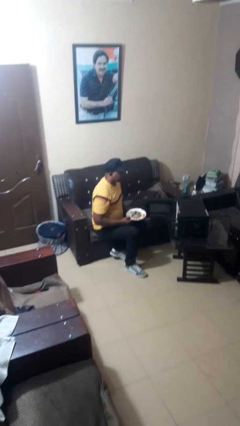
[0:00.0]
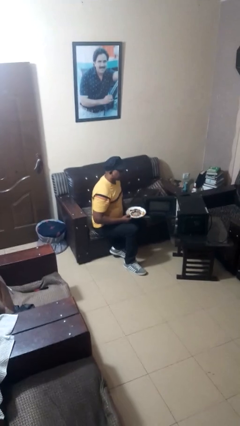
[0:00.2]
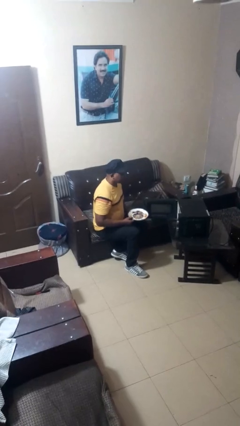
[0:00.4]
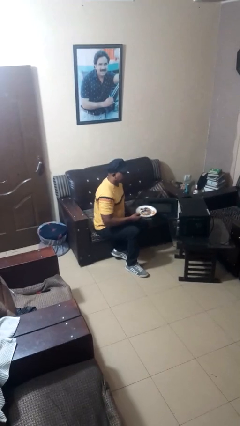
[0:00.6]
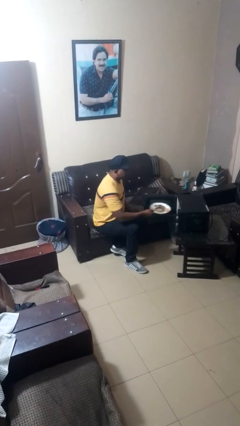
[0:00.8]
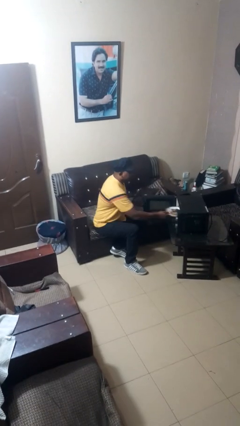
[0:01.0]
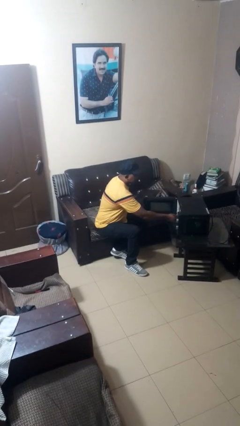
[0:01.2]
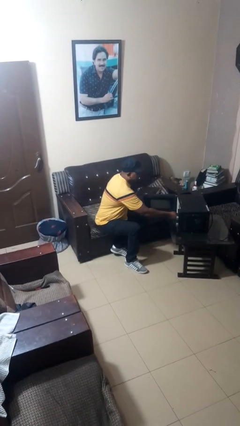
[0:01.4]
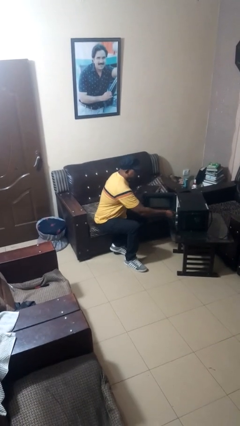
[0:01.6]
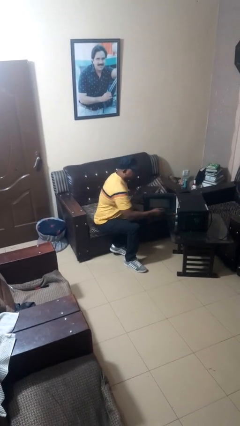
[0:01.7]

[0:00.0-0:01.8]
person puts object into microwave

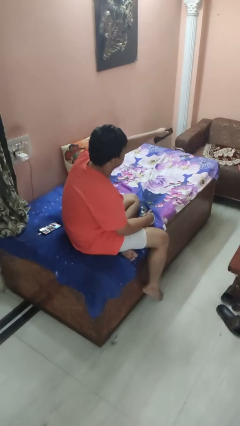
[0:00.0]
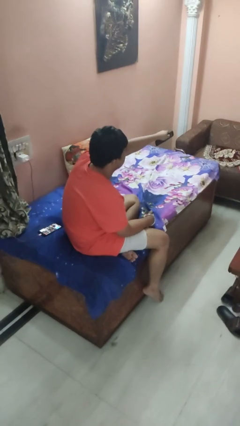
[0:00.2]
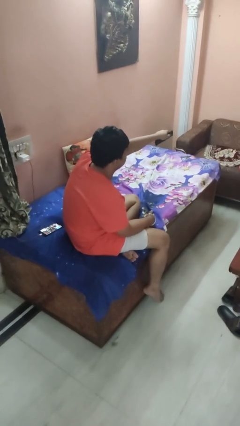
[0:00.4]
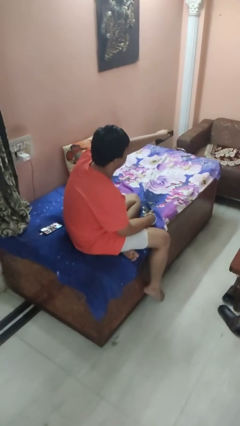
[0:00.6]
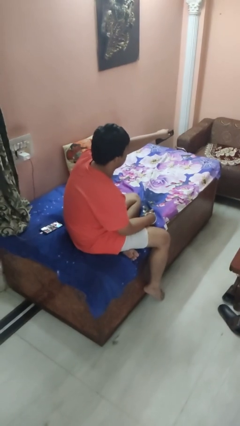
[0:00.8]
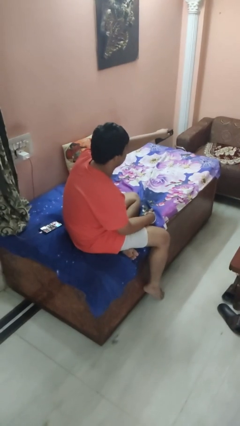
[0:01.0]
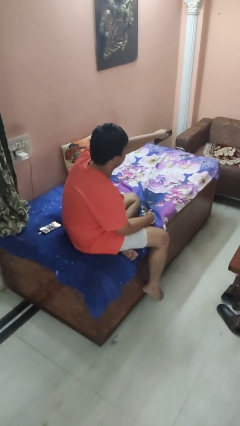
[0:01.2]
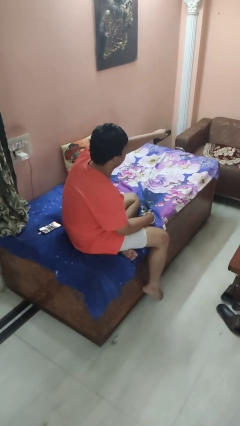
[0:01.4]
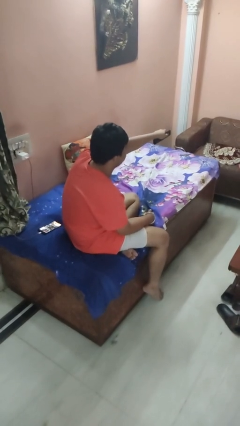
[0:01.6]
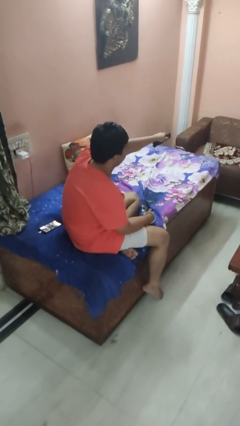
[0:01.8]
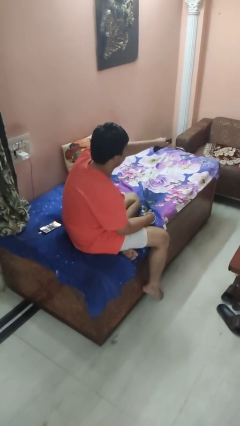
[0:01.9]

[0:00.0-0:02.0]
person uses television remote

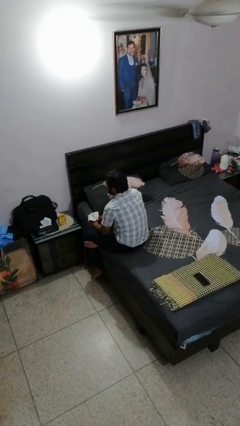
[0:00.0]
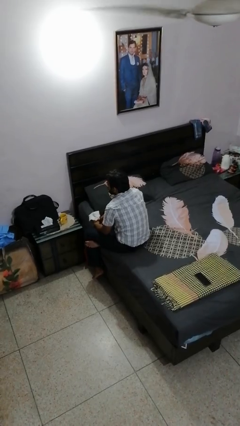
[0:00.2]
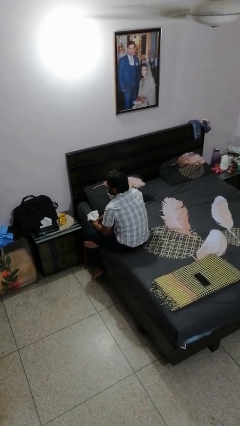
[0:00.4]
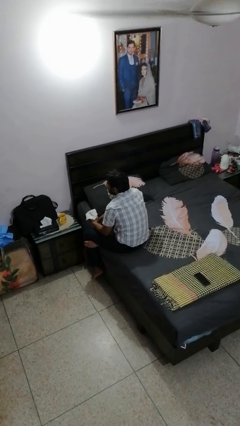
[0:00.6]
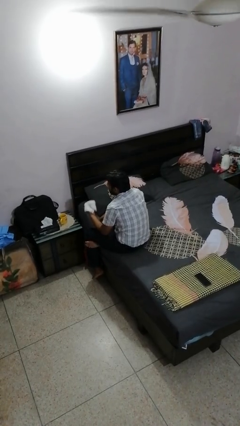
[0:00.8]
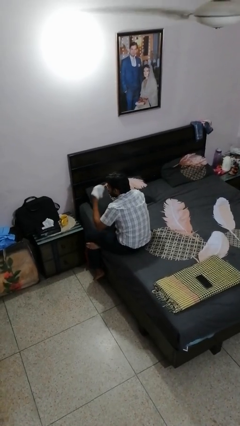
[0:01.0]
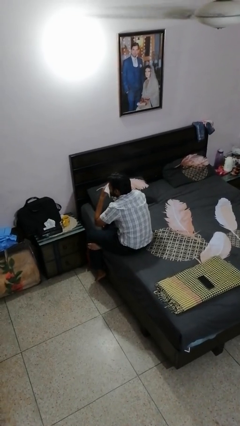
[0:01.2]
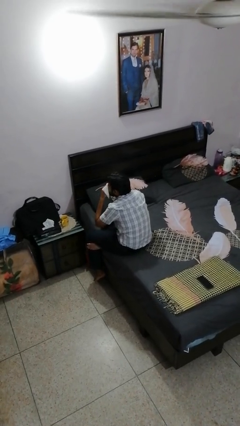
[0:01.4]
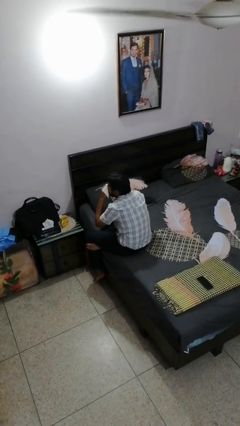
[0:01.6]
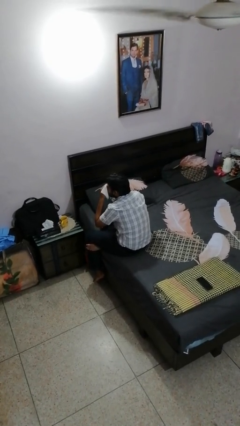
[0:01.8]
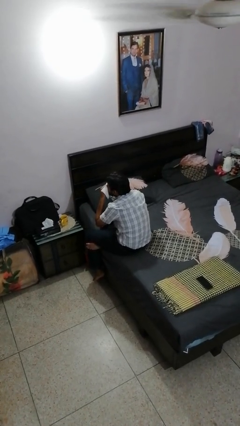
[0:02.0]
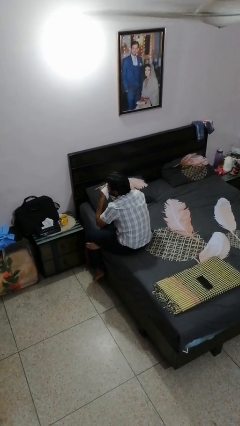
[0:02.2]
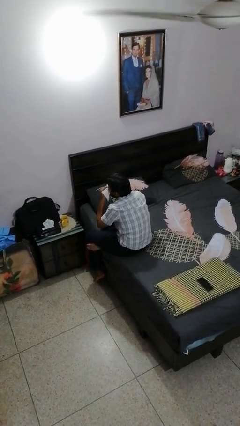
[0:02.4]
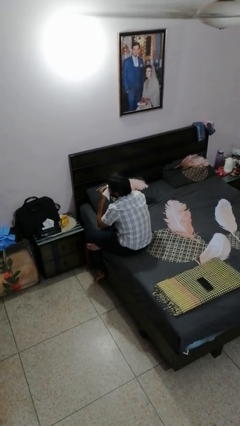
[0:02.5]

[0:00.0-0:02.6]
person blows nose

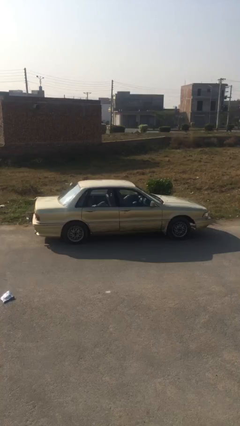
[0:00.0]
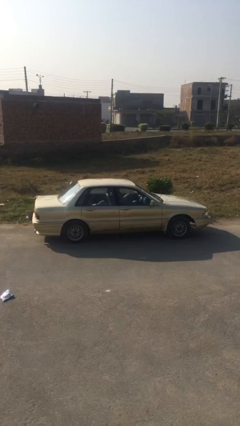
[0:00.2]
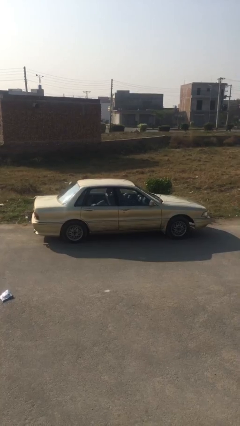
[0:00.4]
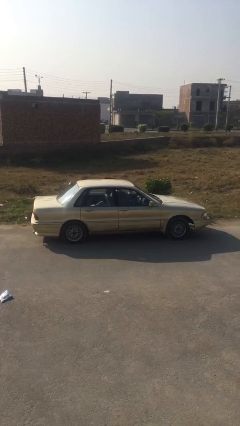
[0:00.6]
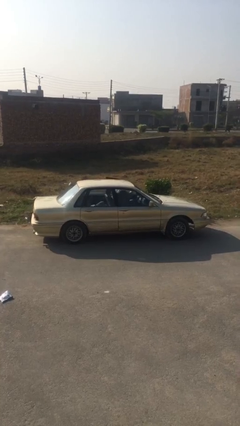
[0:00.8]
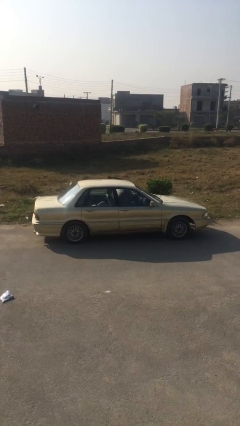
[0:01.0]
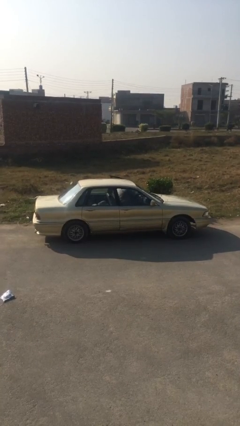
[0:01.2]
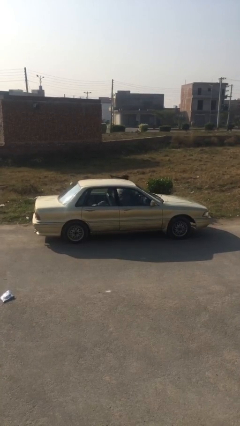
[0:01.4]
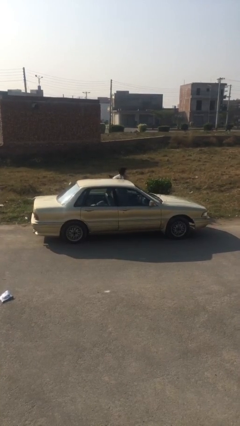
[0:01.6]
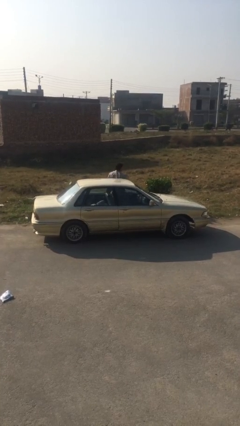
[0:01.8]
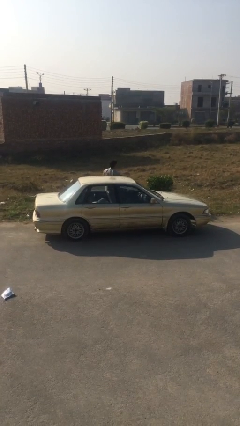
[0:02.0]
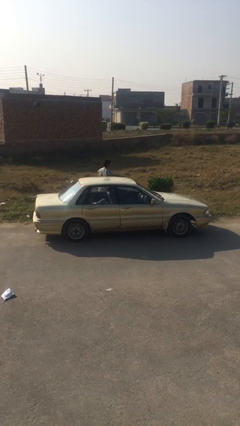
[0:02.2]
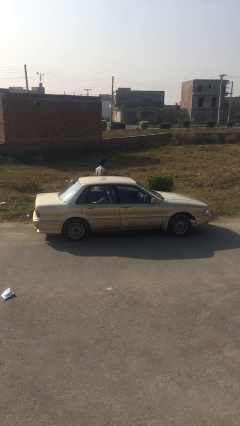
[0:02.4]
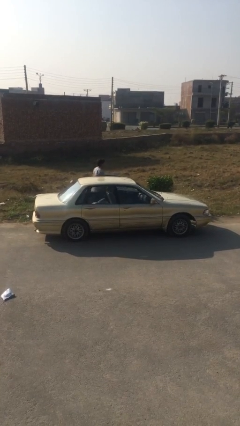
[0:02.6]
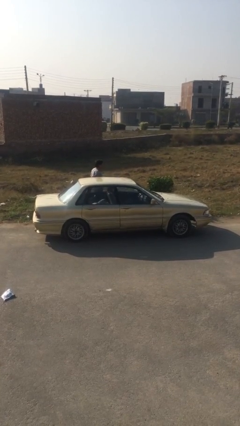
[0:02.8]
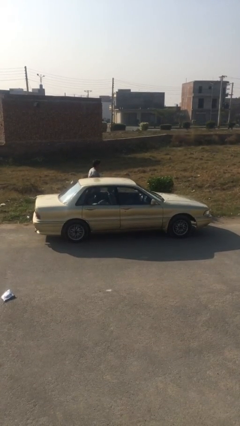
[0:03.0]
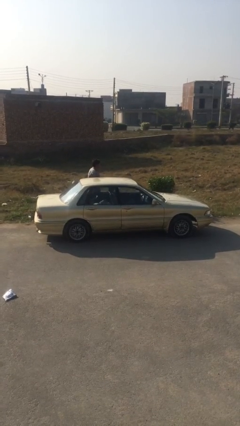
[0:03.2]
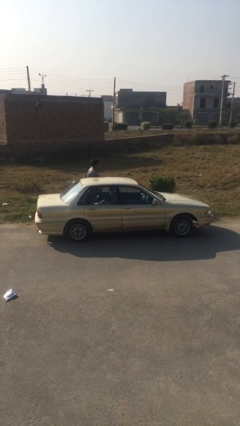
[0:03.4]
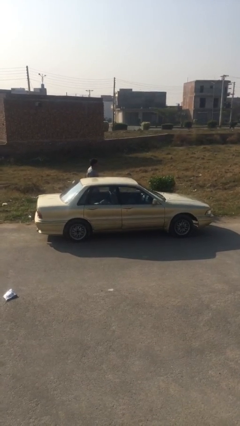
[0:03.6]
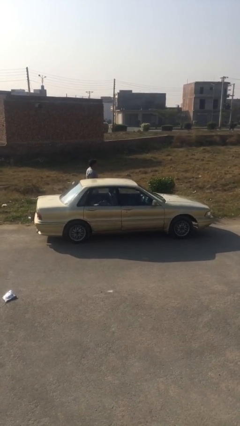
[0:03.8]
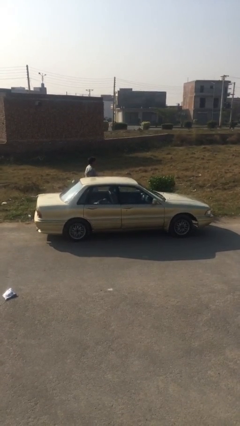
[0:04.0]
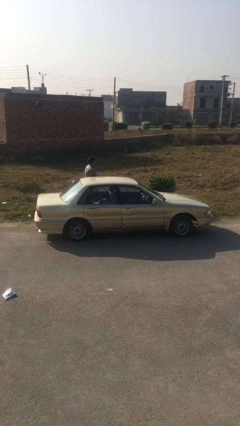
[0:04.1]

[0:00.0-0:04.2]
car drops off person

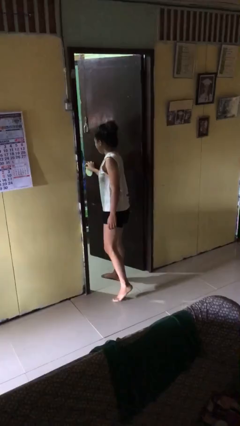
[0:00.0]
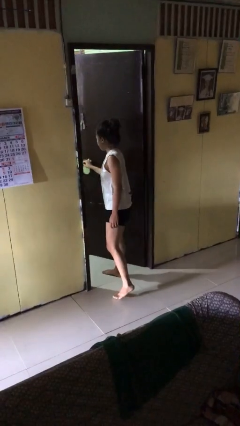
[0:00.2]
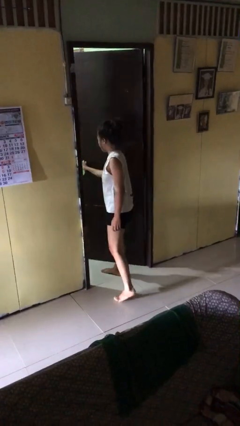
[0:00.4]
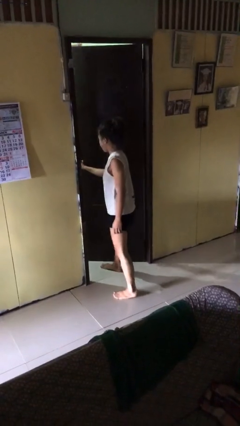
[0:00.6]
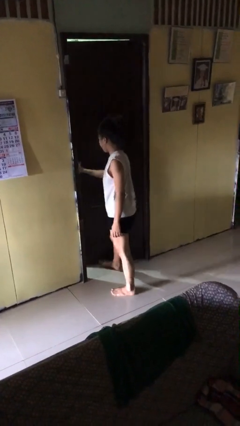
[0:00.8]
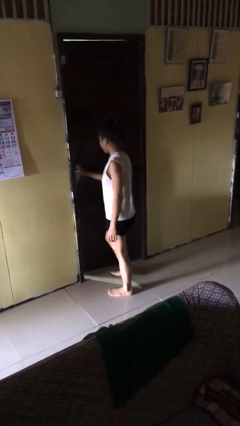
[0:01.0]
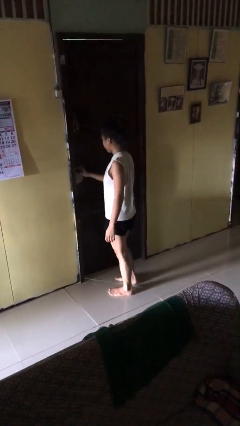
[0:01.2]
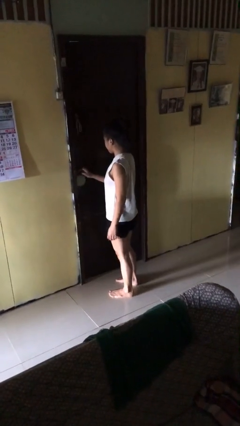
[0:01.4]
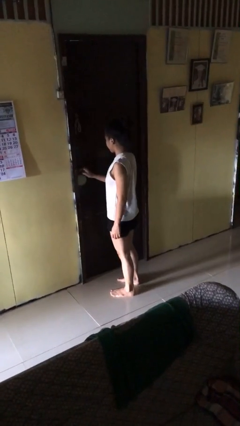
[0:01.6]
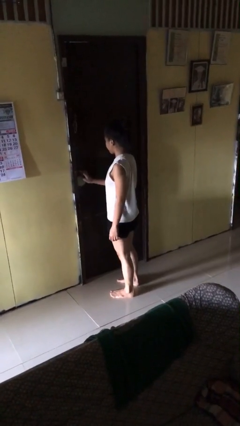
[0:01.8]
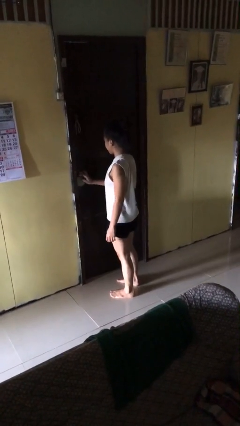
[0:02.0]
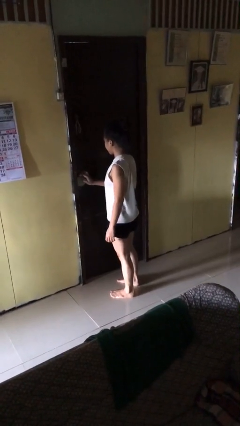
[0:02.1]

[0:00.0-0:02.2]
person closes facility door

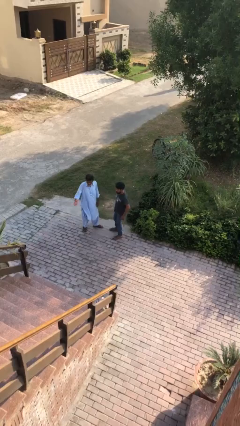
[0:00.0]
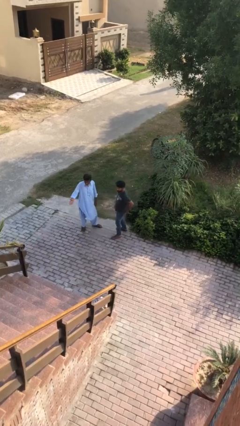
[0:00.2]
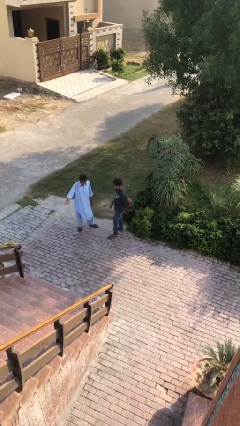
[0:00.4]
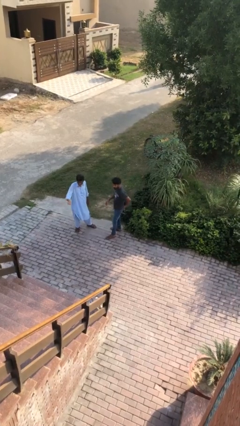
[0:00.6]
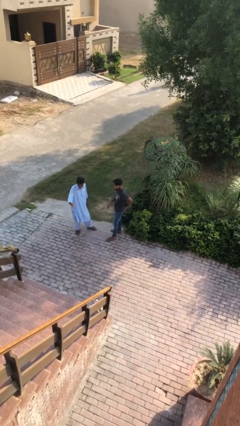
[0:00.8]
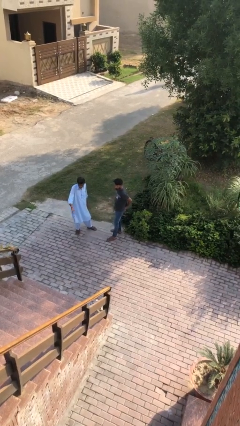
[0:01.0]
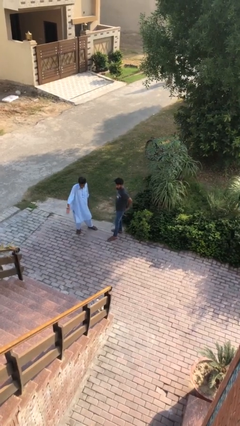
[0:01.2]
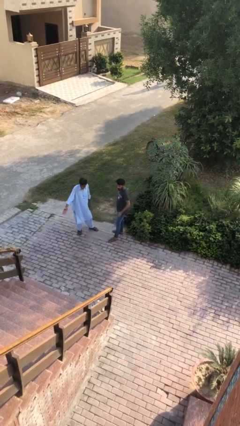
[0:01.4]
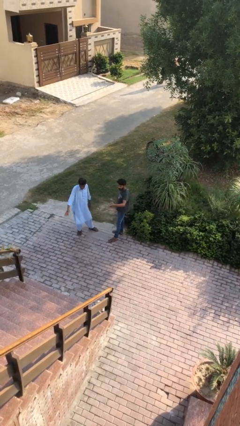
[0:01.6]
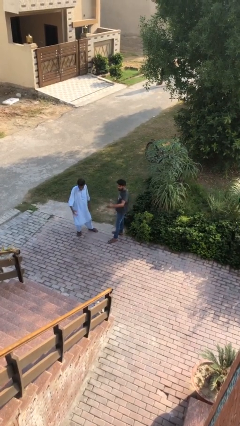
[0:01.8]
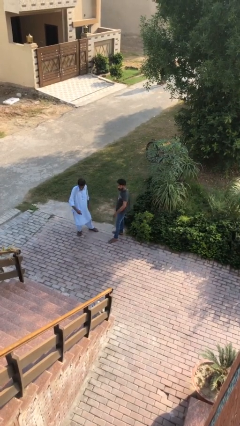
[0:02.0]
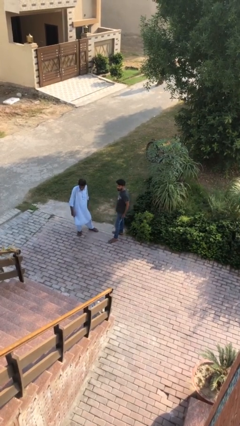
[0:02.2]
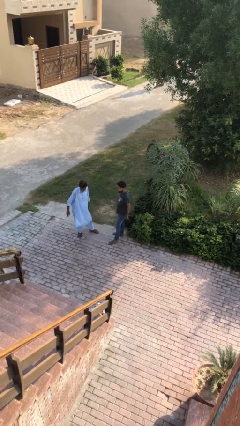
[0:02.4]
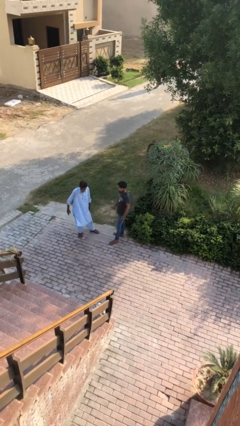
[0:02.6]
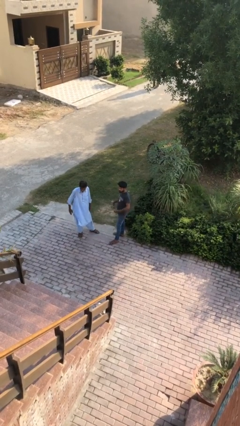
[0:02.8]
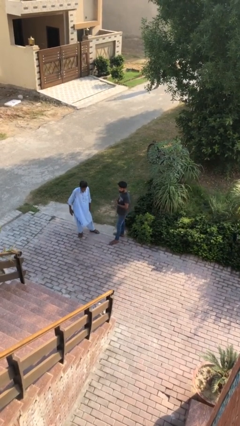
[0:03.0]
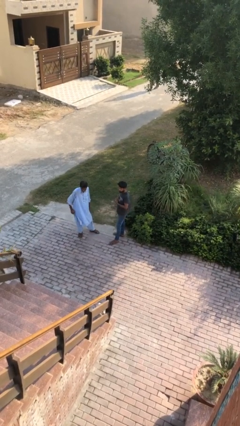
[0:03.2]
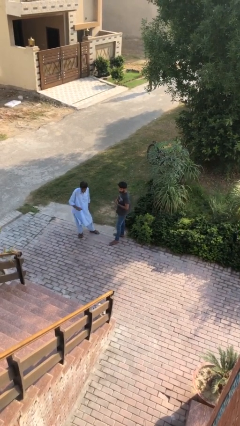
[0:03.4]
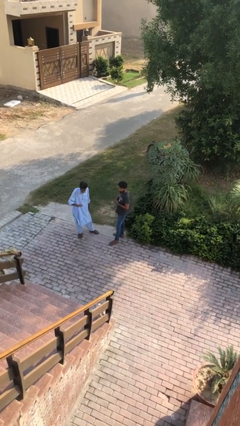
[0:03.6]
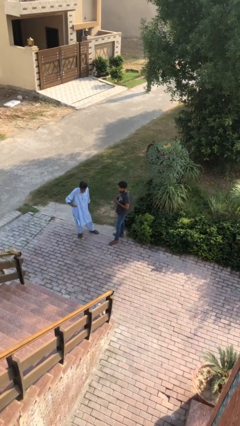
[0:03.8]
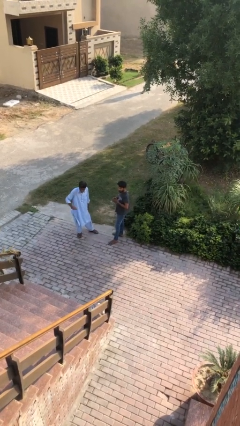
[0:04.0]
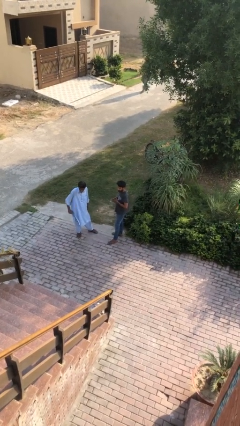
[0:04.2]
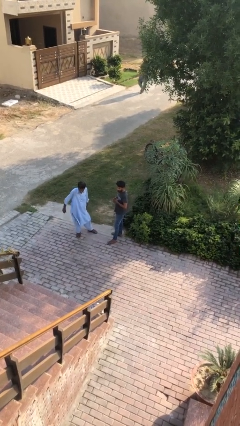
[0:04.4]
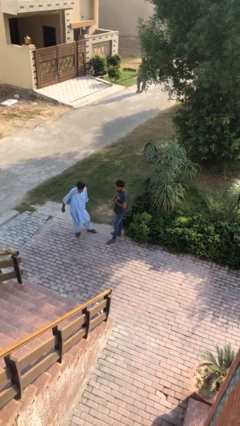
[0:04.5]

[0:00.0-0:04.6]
person talks to person
